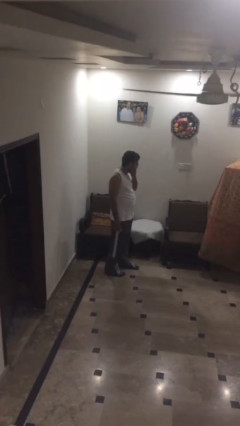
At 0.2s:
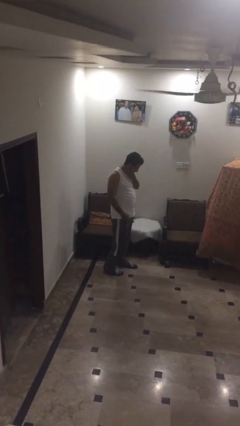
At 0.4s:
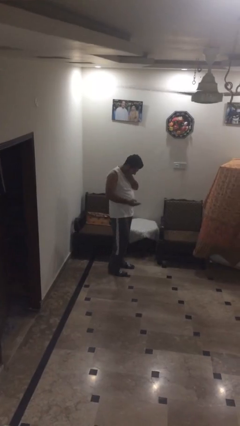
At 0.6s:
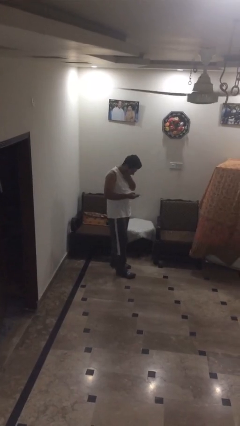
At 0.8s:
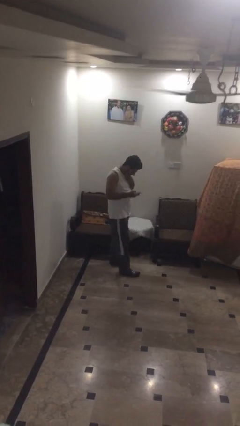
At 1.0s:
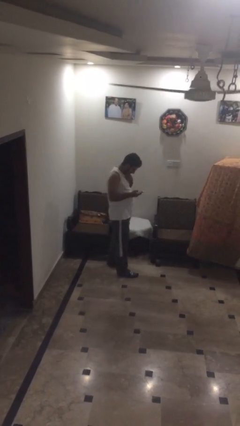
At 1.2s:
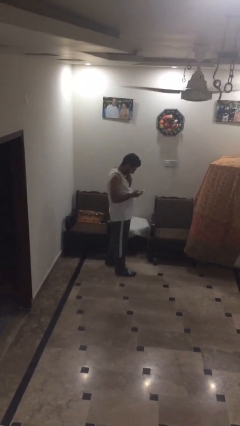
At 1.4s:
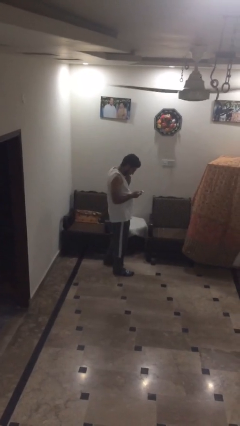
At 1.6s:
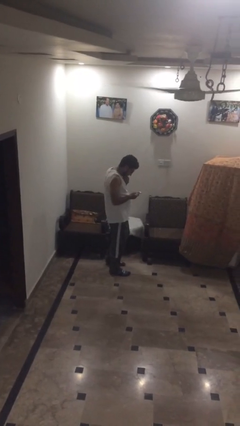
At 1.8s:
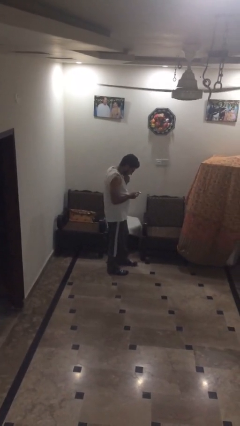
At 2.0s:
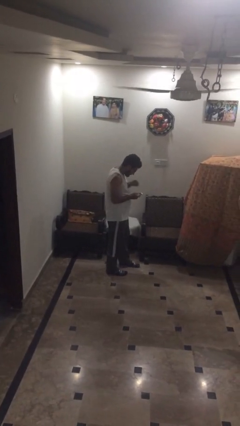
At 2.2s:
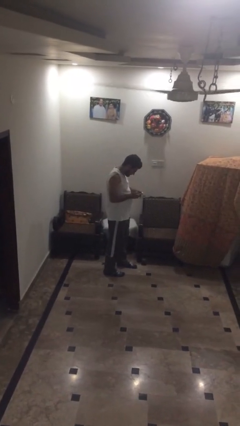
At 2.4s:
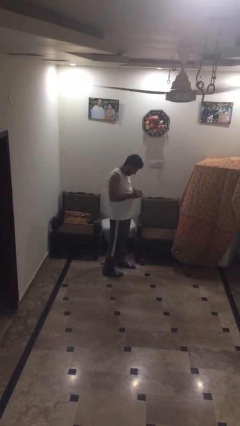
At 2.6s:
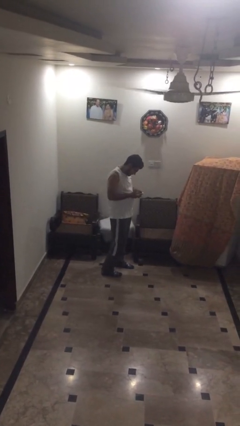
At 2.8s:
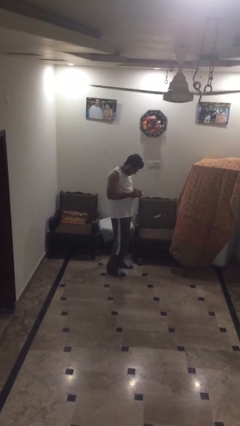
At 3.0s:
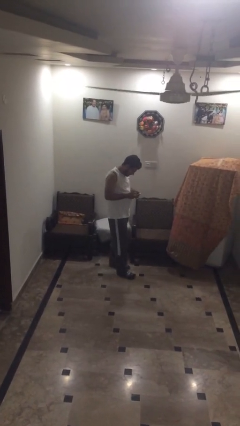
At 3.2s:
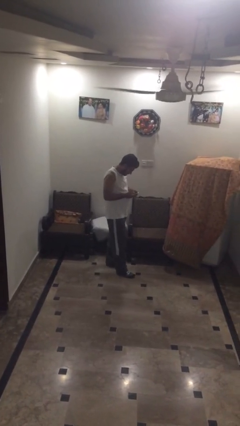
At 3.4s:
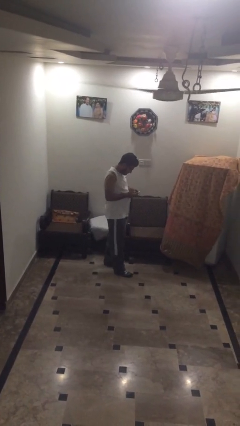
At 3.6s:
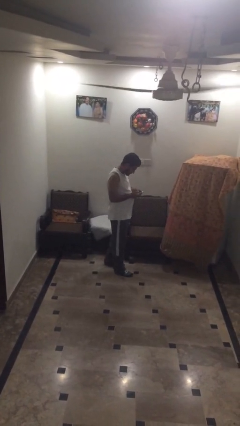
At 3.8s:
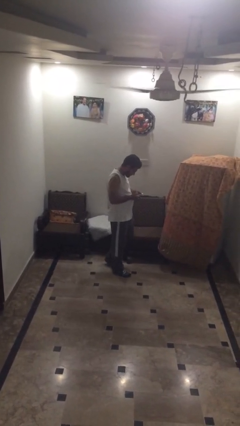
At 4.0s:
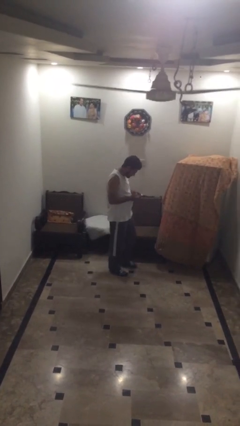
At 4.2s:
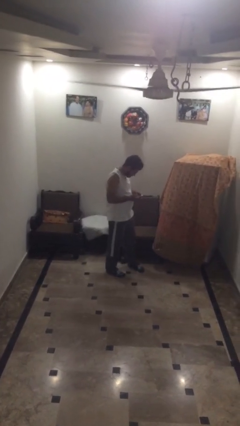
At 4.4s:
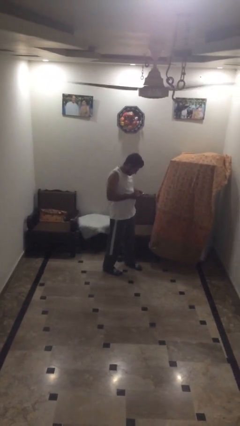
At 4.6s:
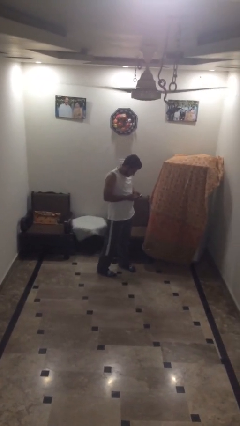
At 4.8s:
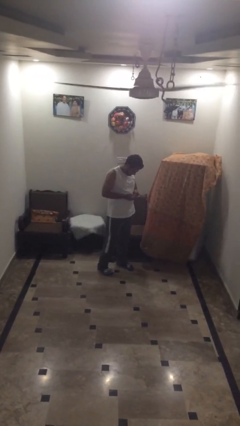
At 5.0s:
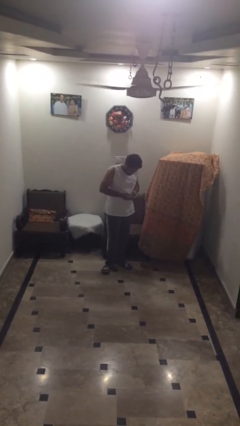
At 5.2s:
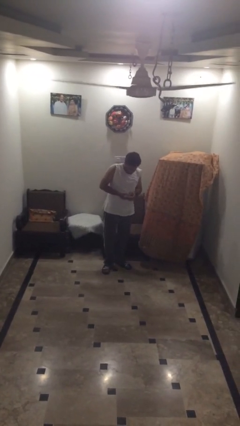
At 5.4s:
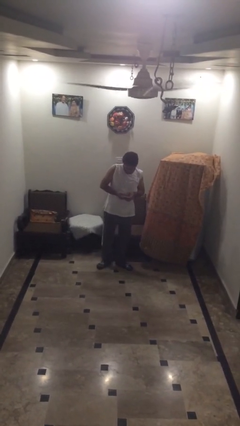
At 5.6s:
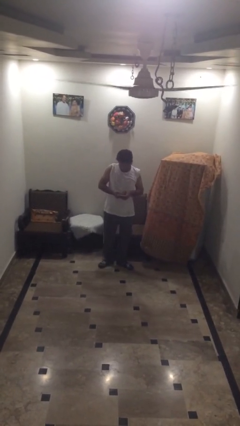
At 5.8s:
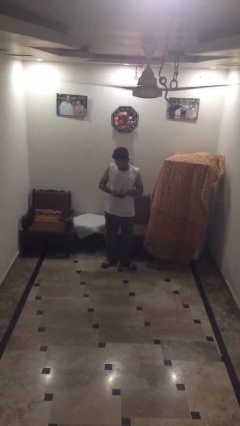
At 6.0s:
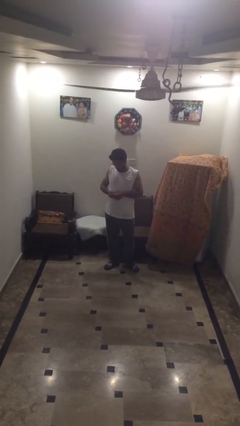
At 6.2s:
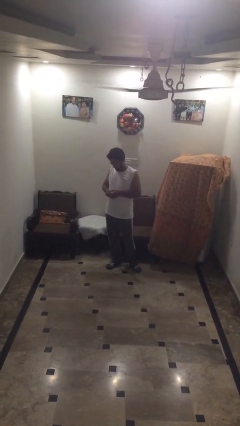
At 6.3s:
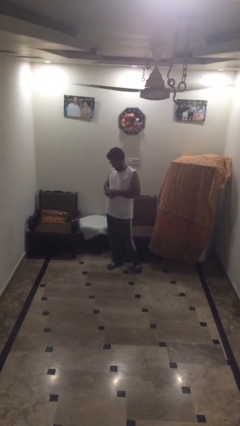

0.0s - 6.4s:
person texts on phone

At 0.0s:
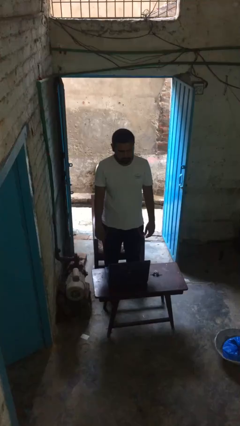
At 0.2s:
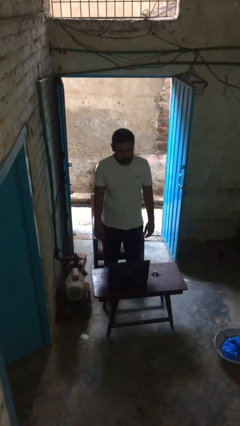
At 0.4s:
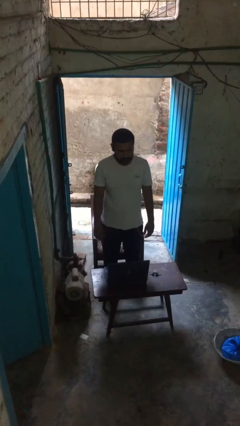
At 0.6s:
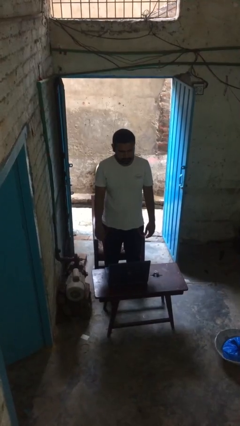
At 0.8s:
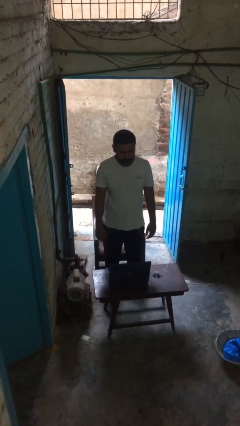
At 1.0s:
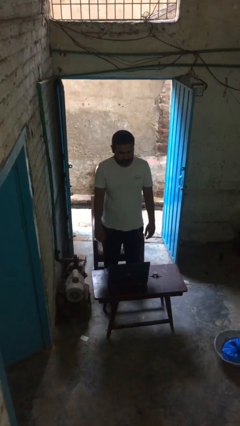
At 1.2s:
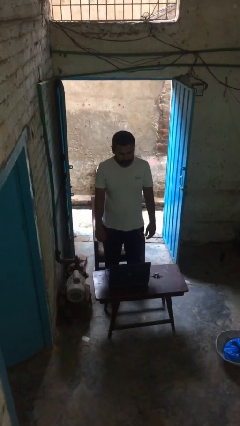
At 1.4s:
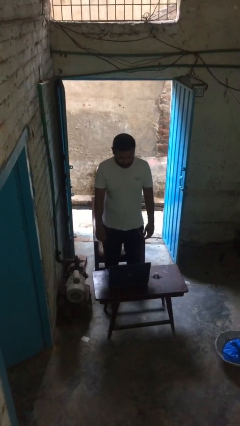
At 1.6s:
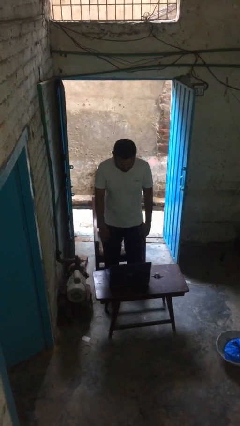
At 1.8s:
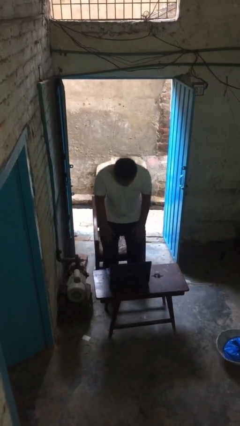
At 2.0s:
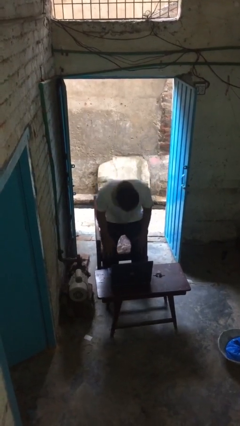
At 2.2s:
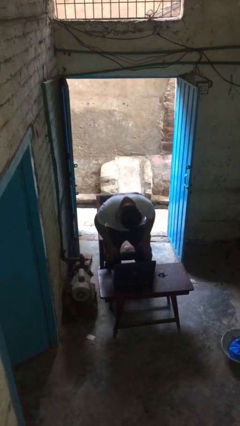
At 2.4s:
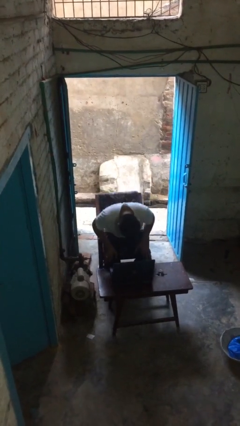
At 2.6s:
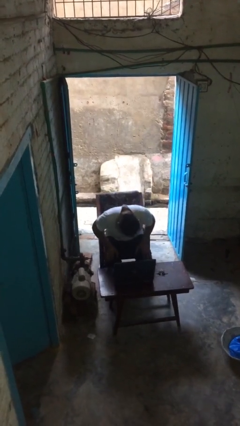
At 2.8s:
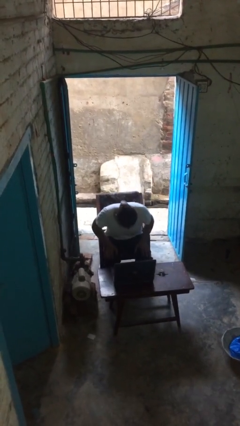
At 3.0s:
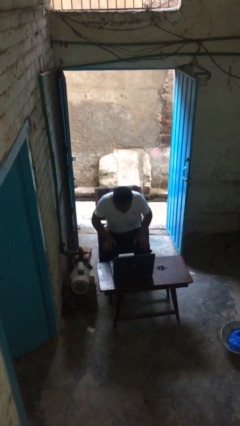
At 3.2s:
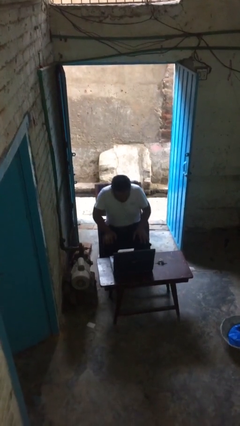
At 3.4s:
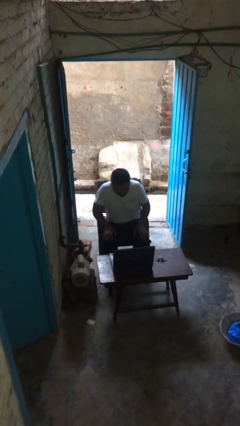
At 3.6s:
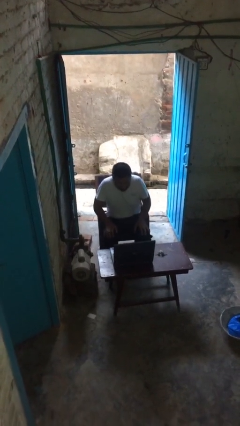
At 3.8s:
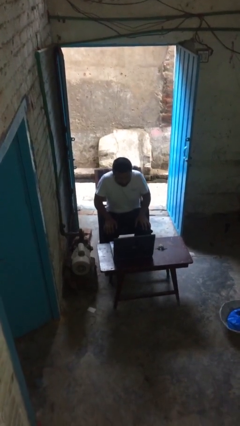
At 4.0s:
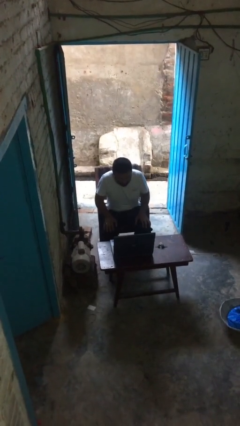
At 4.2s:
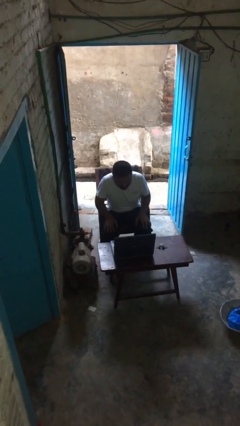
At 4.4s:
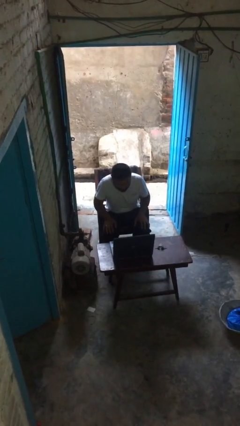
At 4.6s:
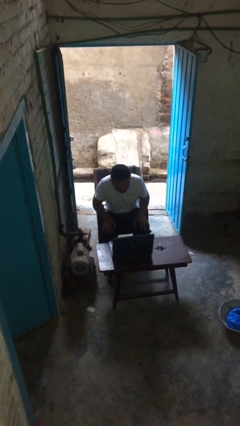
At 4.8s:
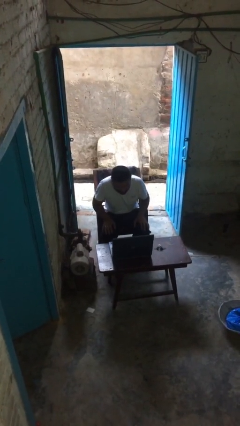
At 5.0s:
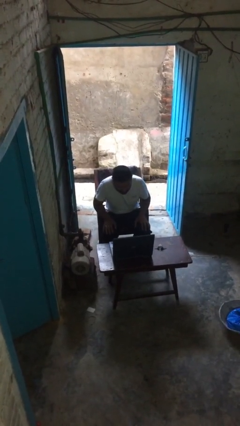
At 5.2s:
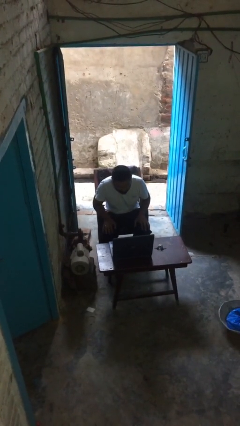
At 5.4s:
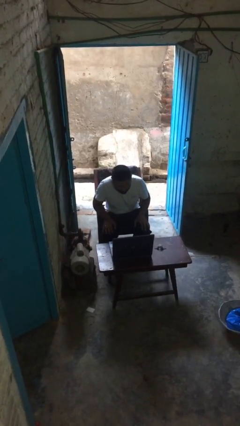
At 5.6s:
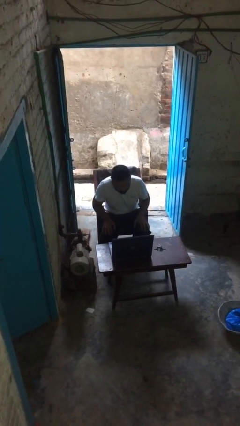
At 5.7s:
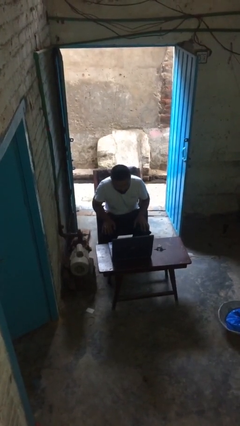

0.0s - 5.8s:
person sits down

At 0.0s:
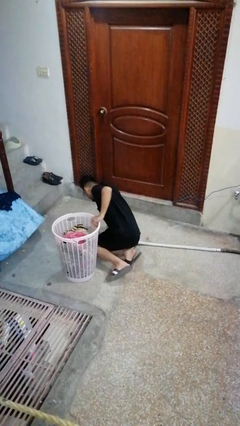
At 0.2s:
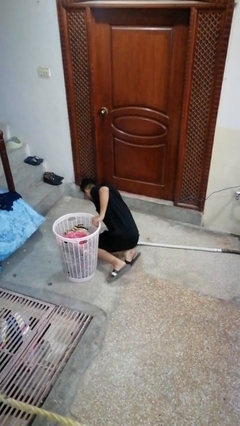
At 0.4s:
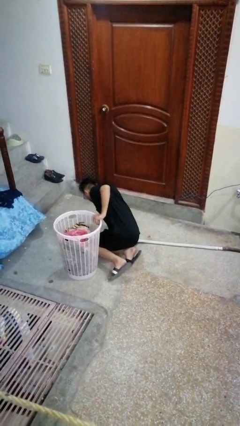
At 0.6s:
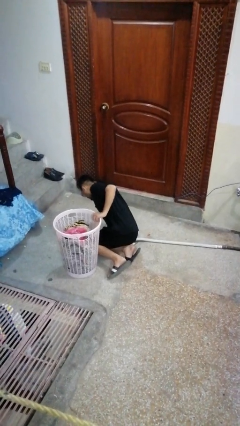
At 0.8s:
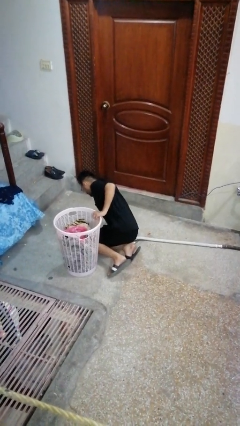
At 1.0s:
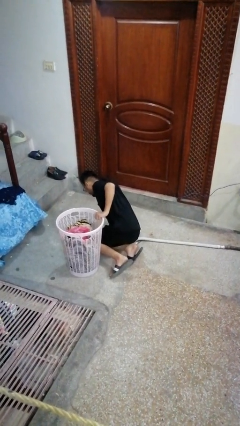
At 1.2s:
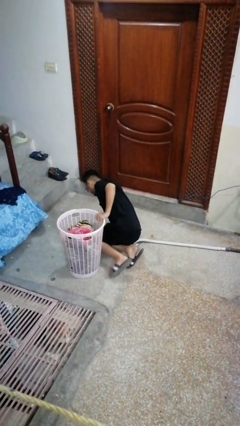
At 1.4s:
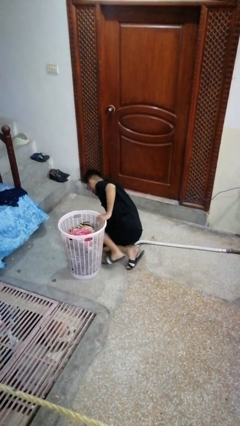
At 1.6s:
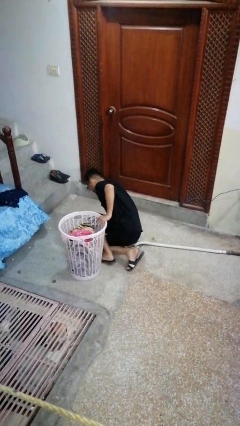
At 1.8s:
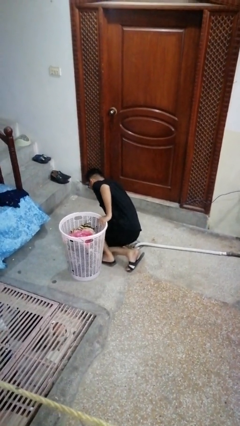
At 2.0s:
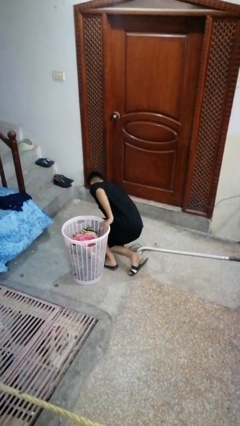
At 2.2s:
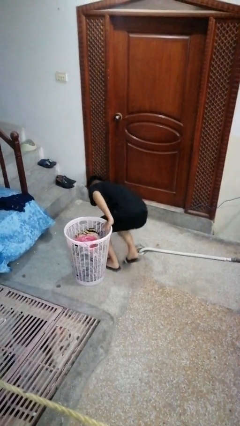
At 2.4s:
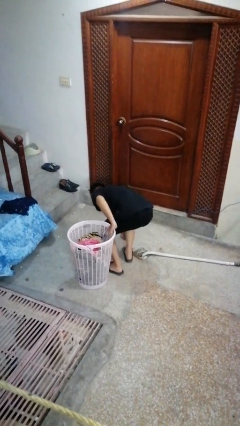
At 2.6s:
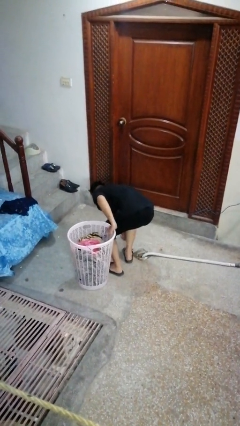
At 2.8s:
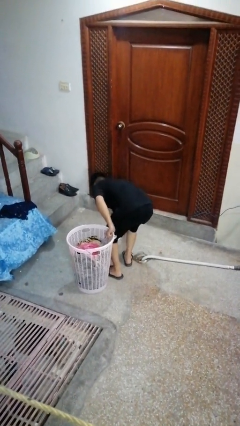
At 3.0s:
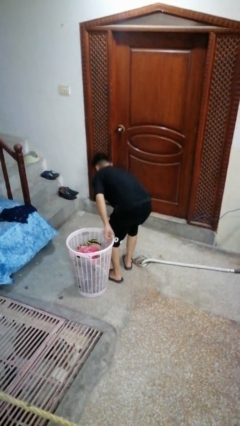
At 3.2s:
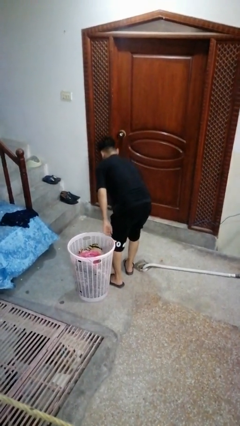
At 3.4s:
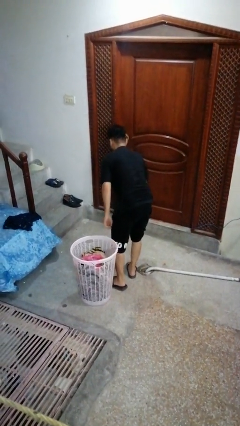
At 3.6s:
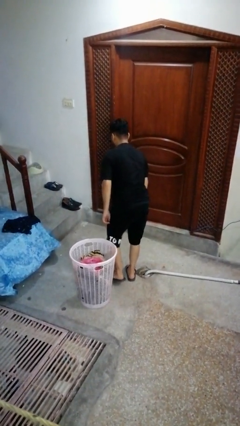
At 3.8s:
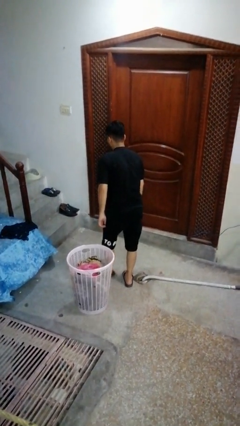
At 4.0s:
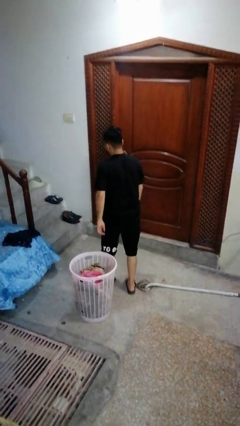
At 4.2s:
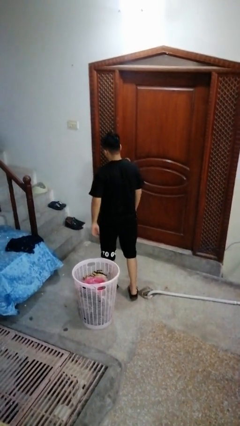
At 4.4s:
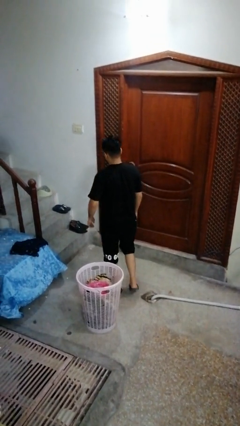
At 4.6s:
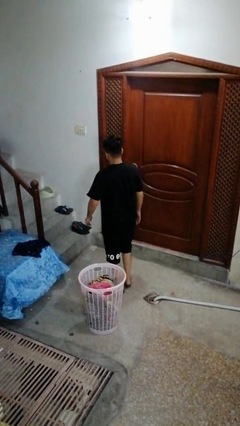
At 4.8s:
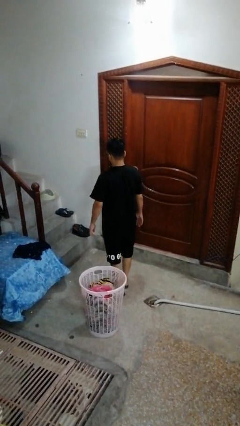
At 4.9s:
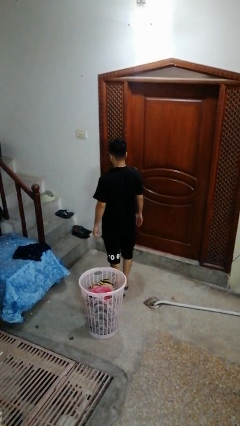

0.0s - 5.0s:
person stands up from floor

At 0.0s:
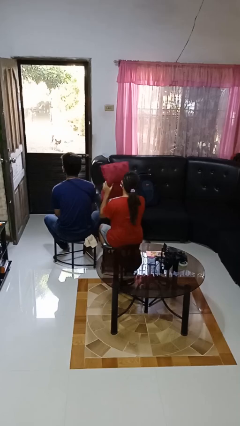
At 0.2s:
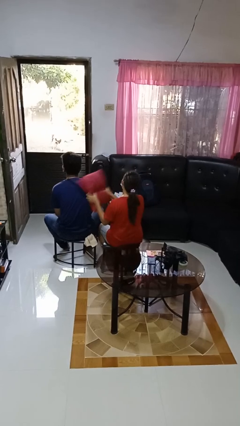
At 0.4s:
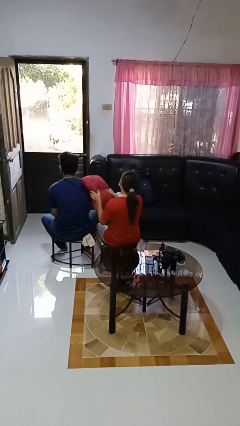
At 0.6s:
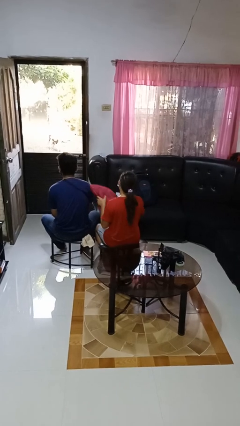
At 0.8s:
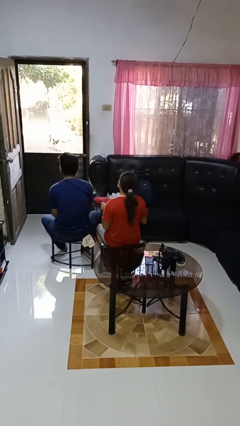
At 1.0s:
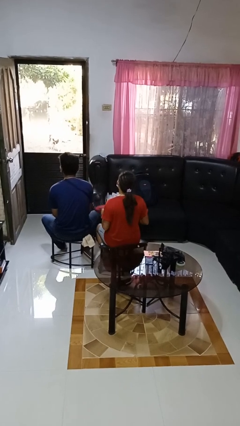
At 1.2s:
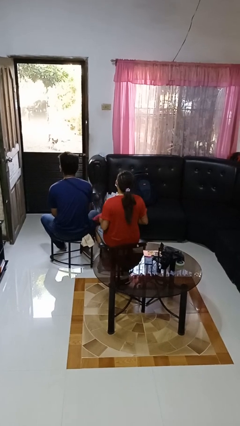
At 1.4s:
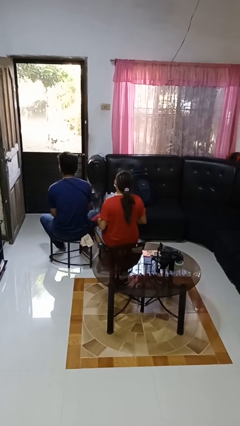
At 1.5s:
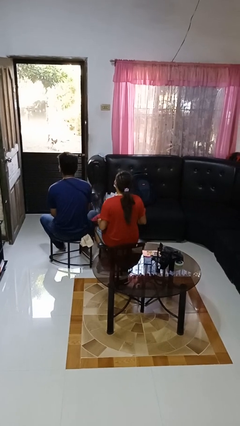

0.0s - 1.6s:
person hits person with pillow
